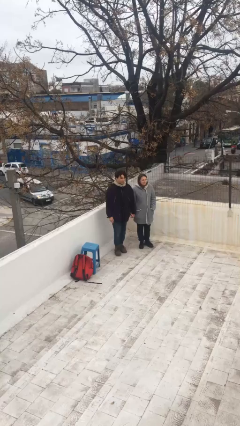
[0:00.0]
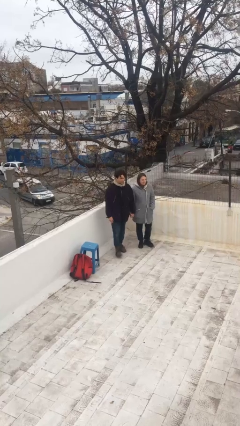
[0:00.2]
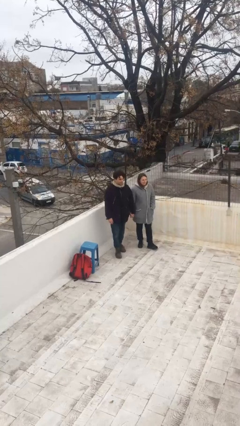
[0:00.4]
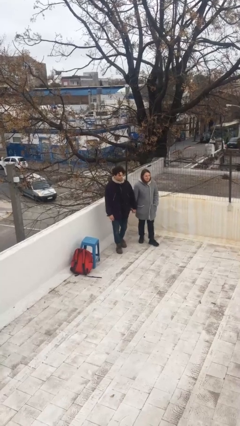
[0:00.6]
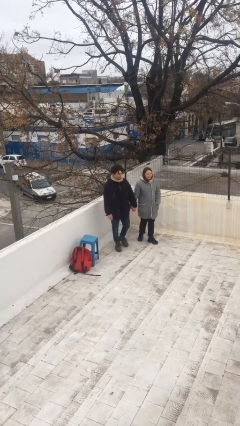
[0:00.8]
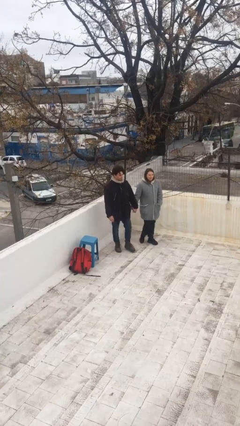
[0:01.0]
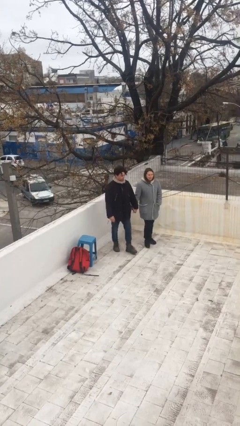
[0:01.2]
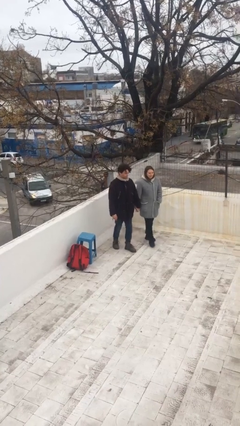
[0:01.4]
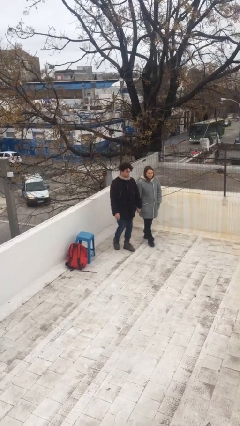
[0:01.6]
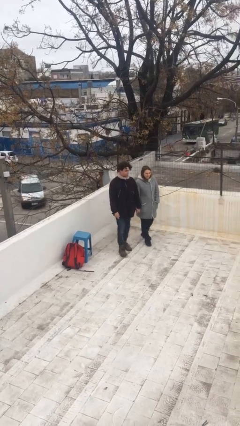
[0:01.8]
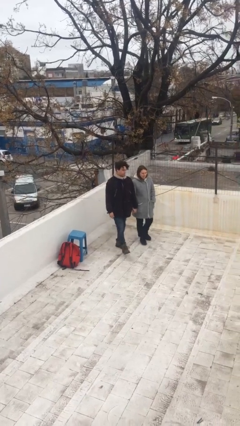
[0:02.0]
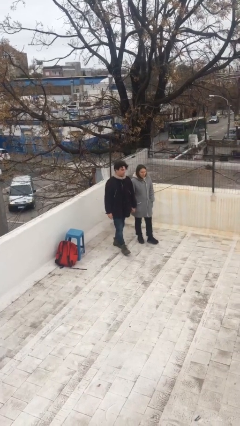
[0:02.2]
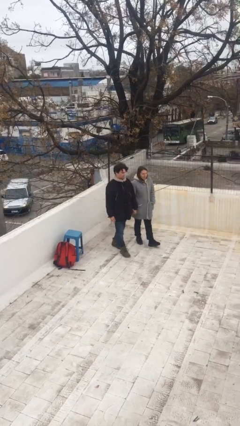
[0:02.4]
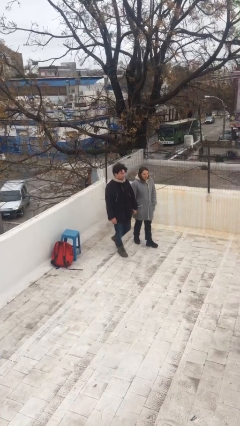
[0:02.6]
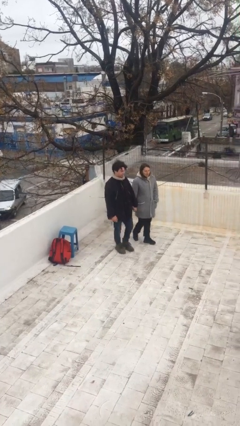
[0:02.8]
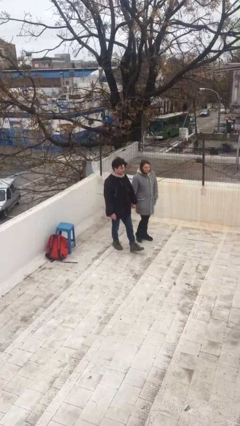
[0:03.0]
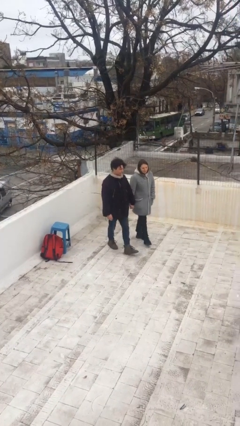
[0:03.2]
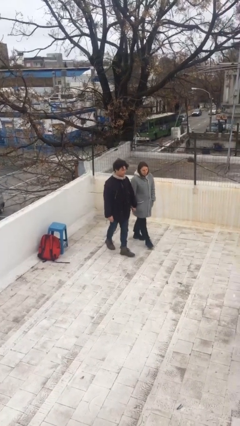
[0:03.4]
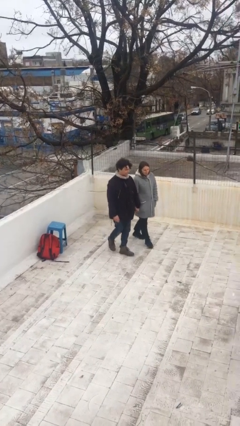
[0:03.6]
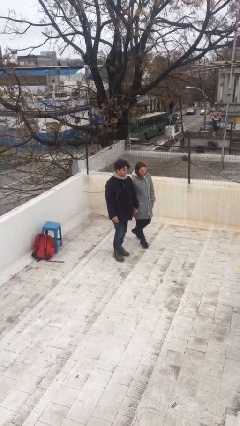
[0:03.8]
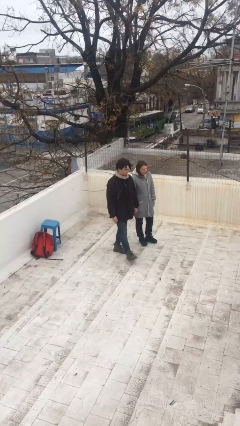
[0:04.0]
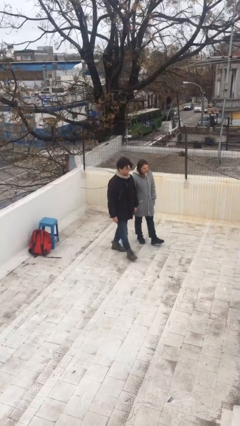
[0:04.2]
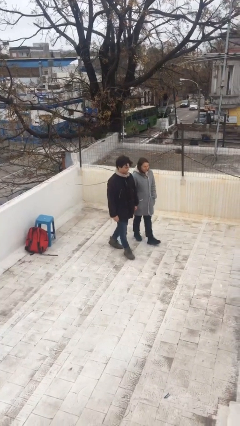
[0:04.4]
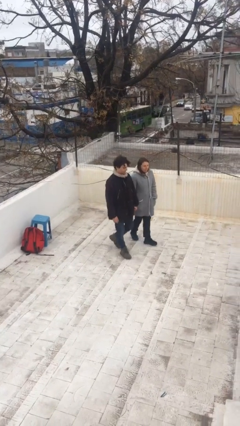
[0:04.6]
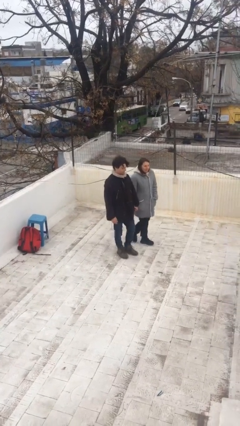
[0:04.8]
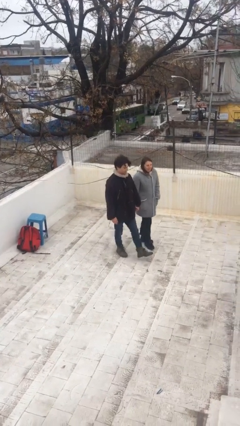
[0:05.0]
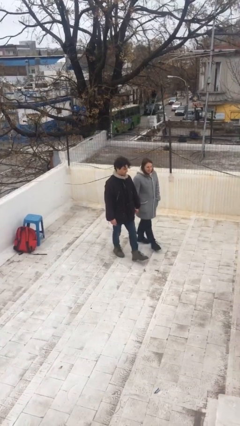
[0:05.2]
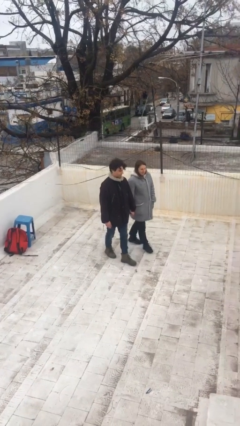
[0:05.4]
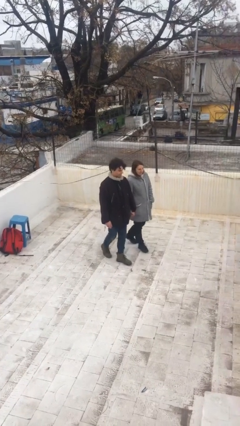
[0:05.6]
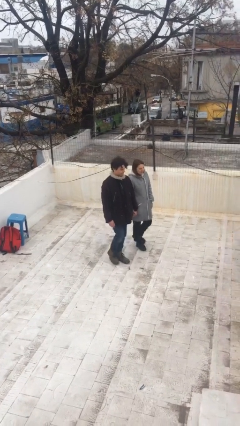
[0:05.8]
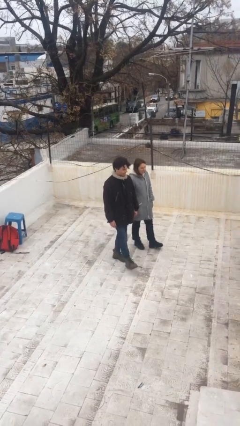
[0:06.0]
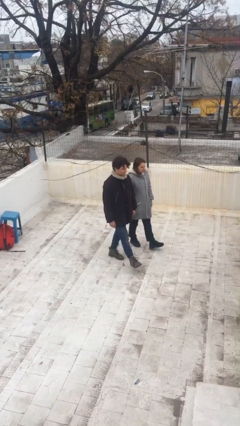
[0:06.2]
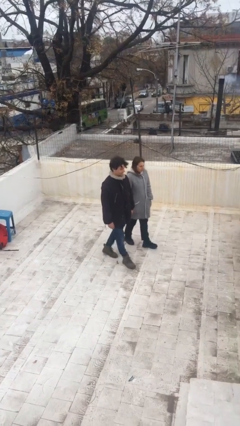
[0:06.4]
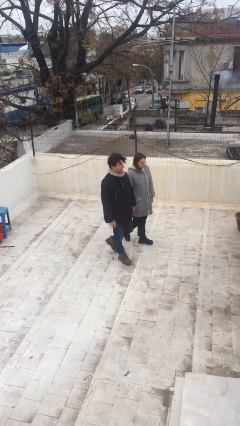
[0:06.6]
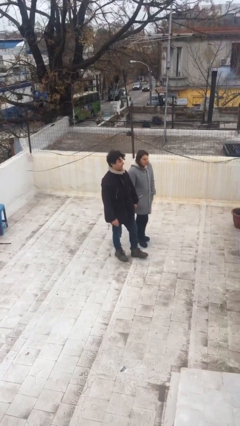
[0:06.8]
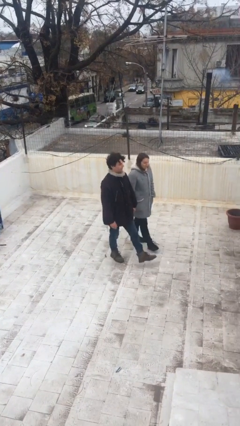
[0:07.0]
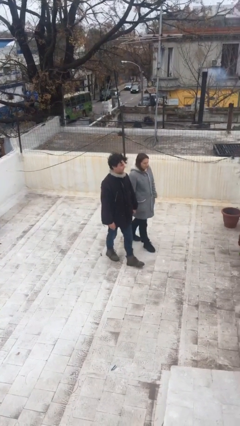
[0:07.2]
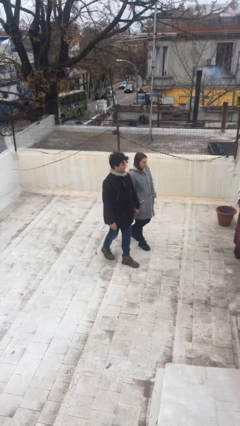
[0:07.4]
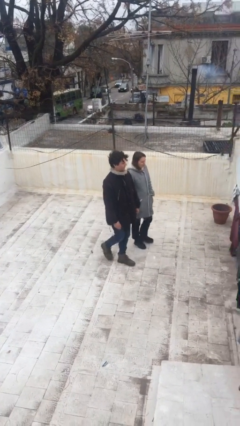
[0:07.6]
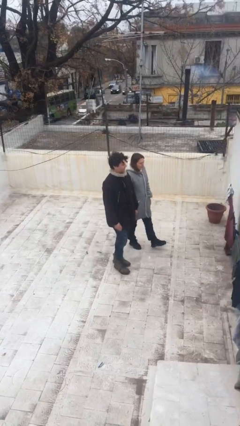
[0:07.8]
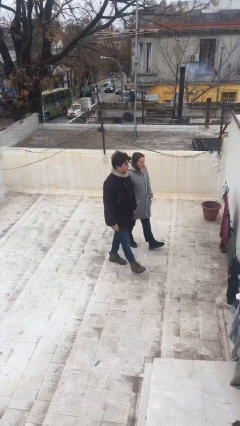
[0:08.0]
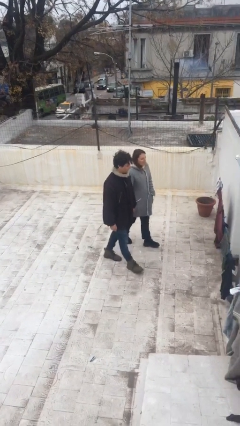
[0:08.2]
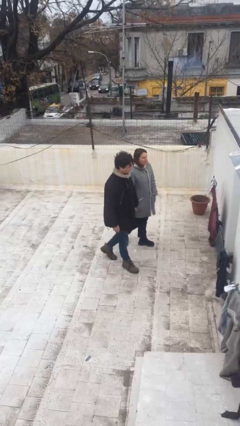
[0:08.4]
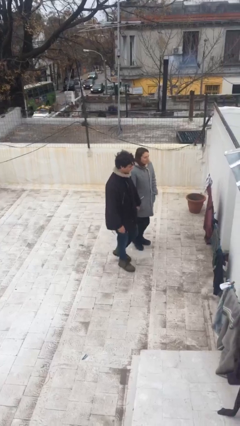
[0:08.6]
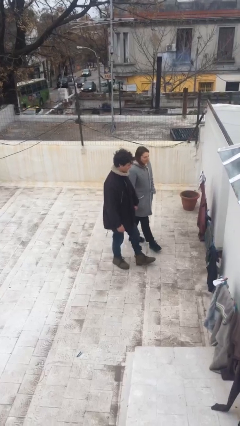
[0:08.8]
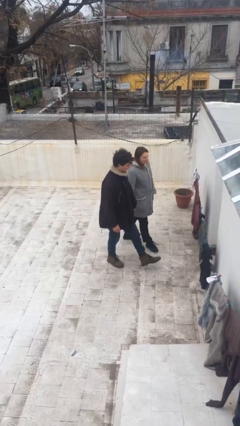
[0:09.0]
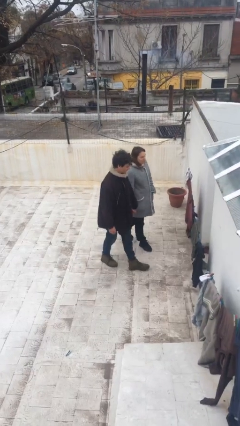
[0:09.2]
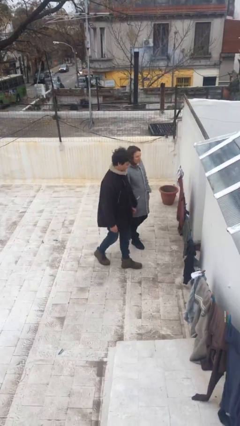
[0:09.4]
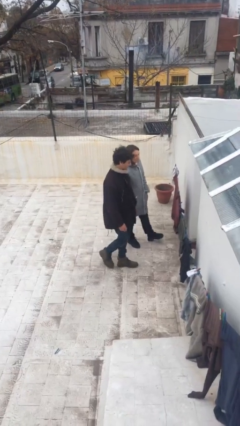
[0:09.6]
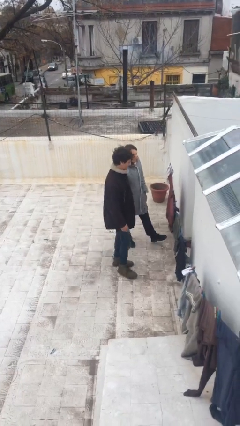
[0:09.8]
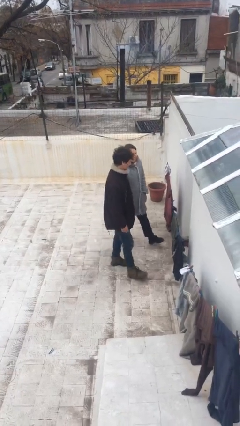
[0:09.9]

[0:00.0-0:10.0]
person holds hand

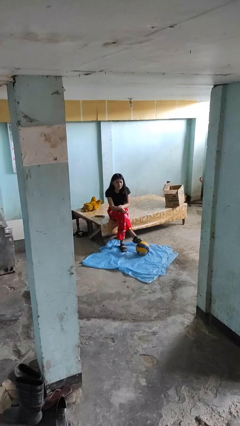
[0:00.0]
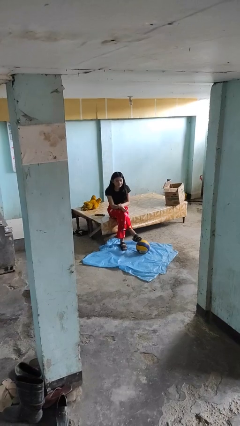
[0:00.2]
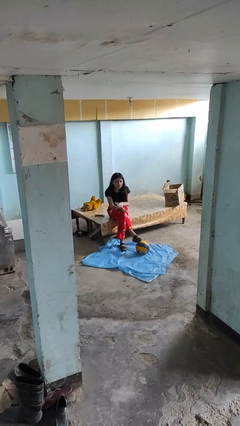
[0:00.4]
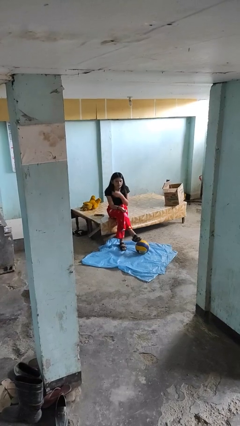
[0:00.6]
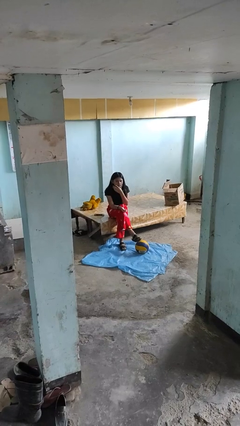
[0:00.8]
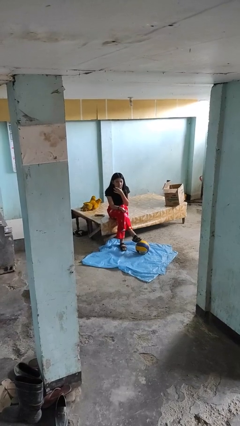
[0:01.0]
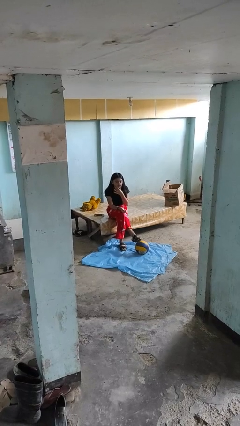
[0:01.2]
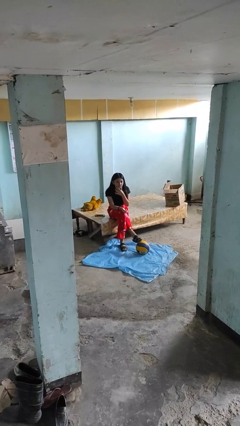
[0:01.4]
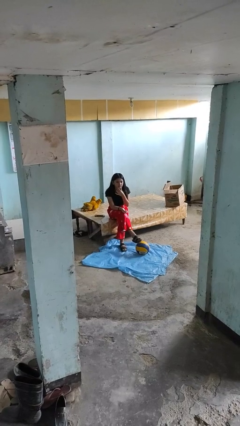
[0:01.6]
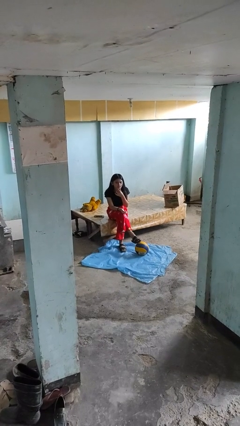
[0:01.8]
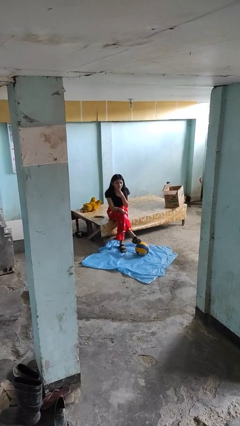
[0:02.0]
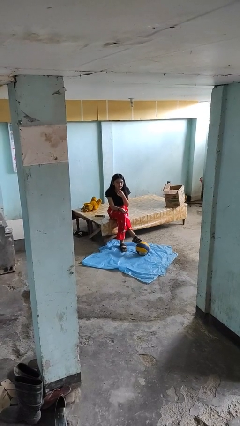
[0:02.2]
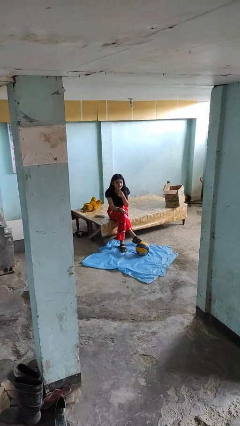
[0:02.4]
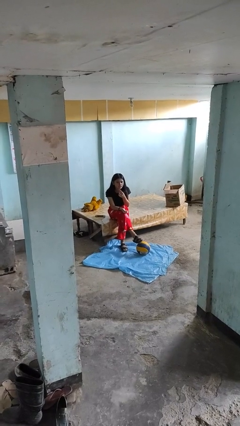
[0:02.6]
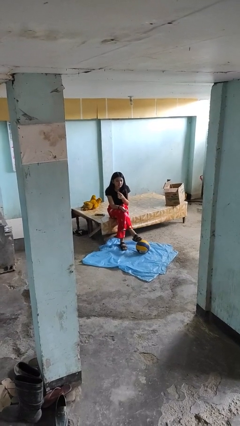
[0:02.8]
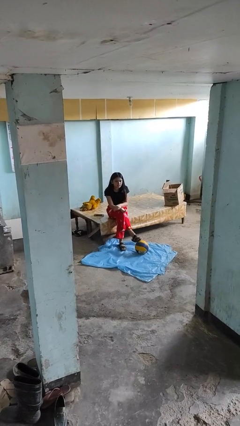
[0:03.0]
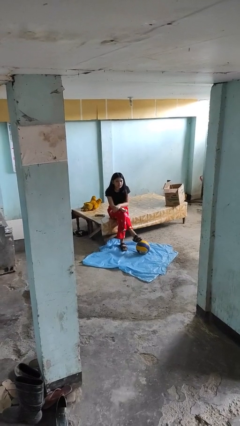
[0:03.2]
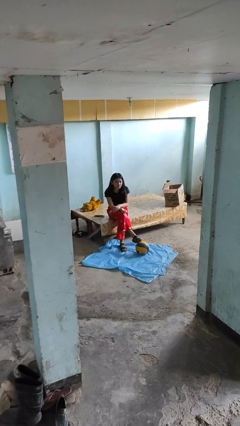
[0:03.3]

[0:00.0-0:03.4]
person strokes chin

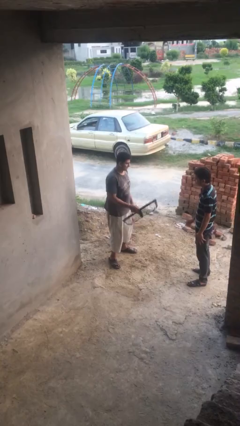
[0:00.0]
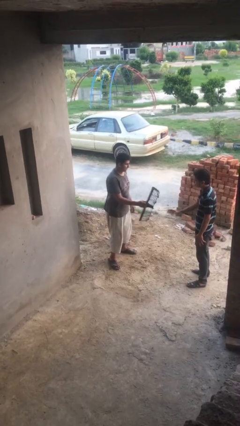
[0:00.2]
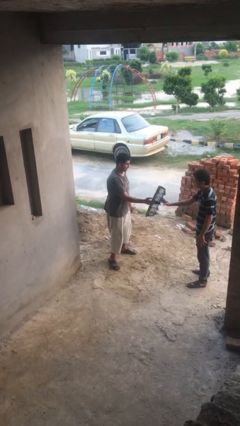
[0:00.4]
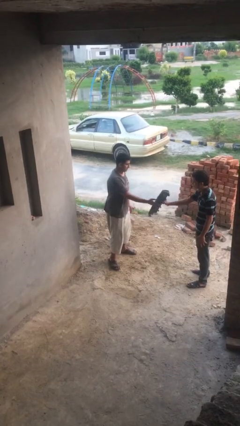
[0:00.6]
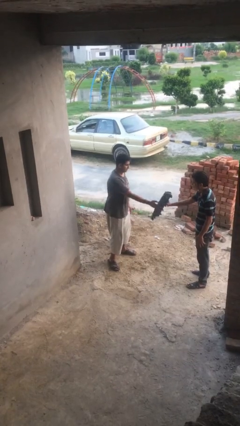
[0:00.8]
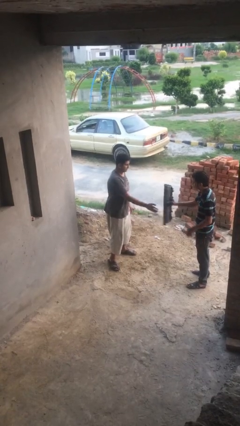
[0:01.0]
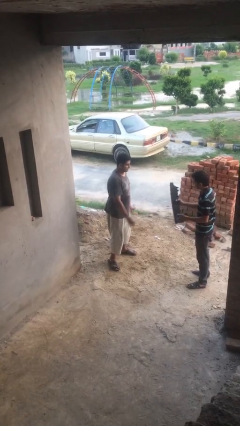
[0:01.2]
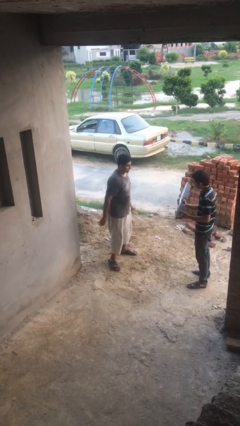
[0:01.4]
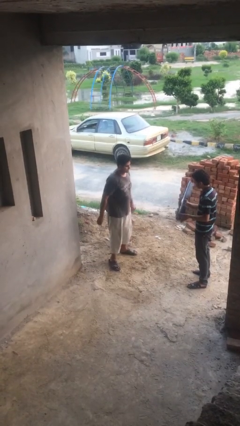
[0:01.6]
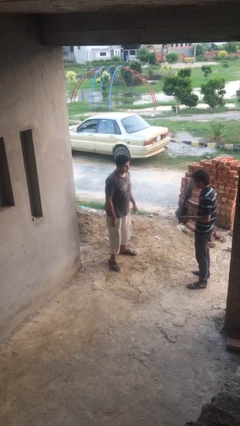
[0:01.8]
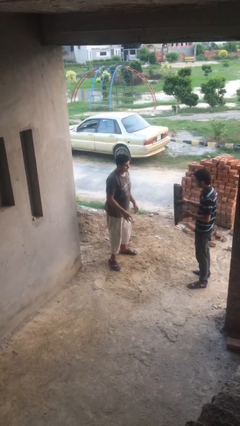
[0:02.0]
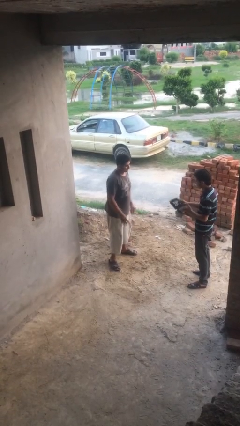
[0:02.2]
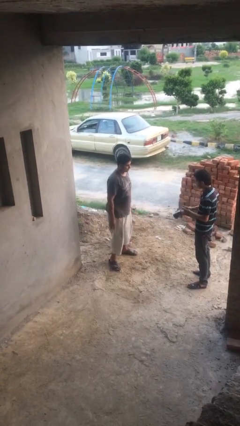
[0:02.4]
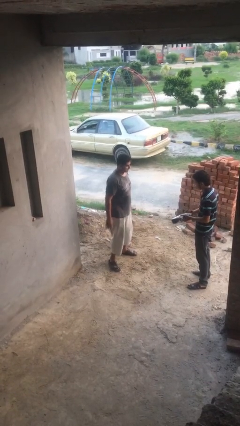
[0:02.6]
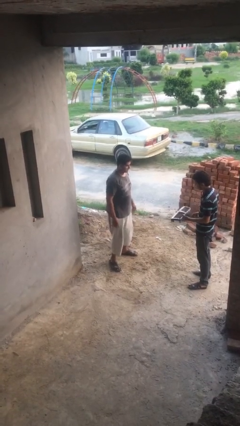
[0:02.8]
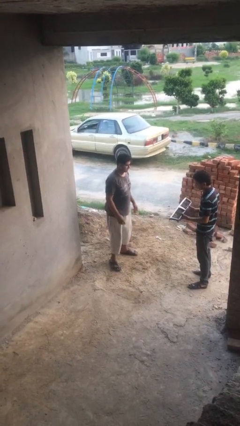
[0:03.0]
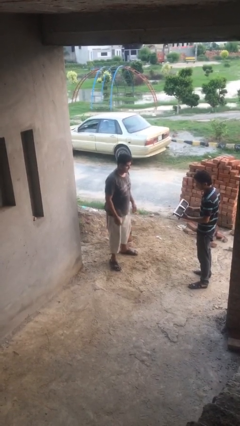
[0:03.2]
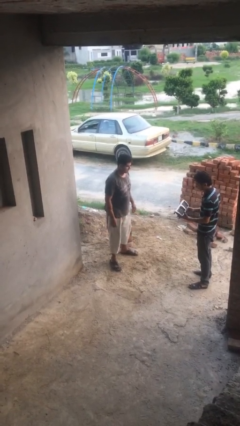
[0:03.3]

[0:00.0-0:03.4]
person transfers object to person

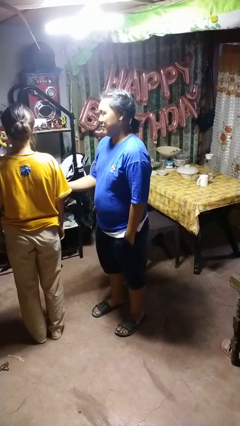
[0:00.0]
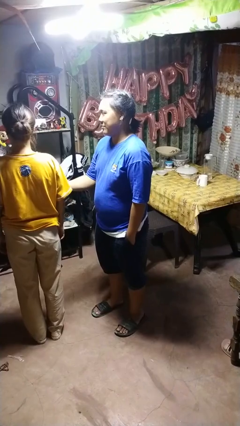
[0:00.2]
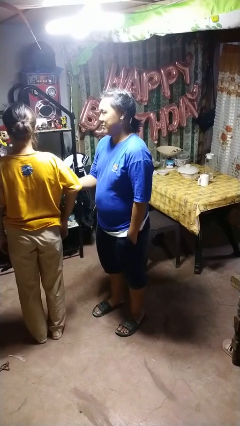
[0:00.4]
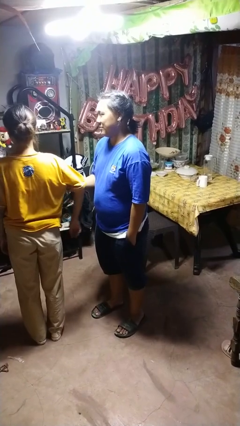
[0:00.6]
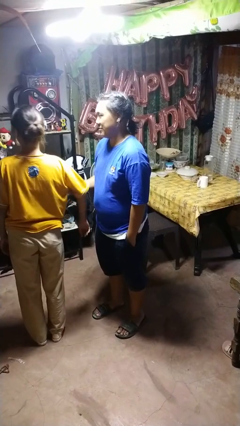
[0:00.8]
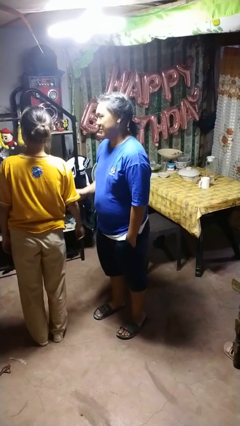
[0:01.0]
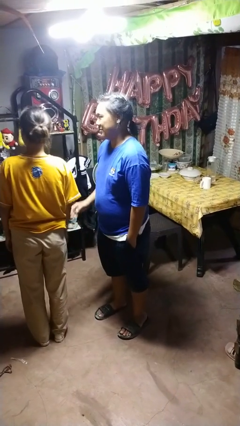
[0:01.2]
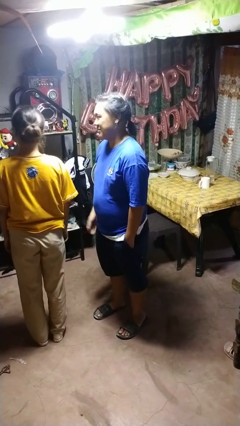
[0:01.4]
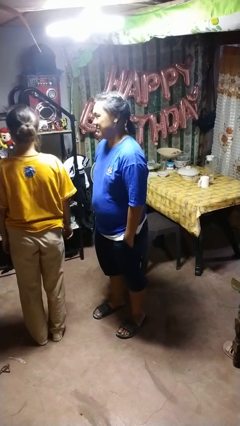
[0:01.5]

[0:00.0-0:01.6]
person grabs person by bicep
